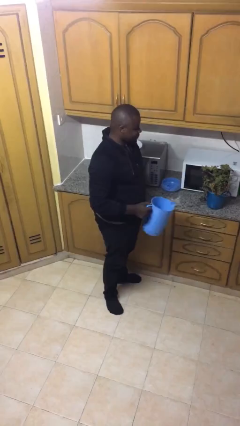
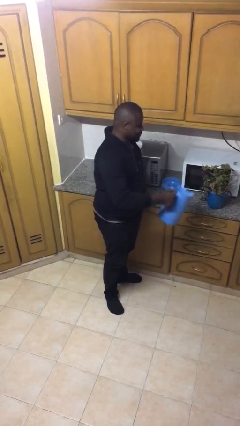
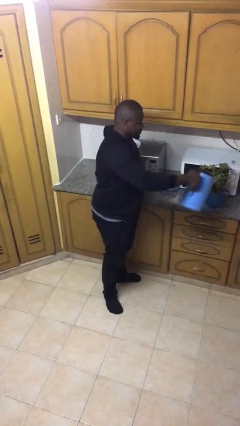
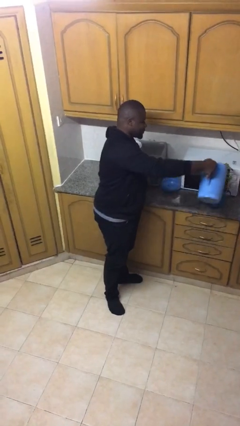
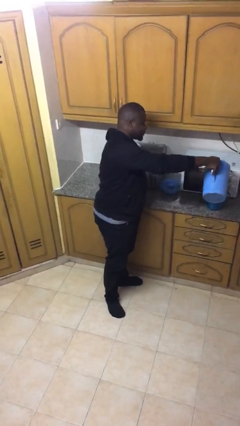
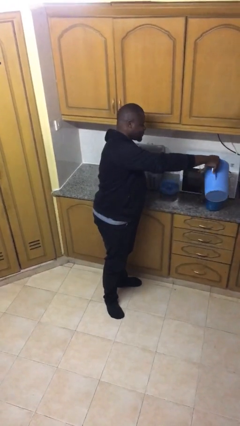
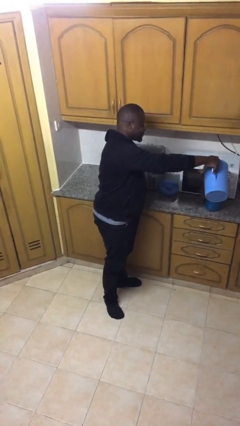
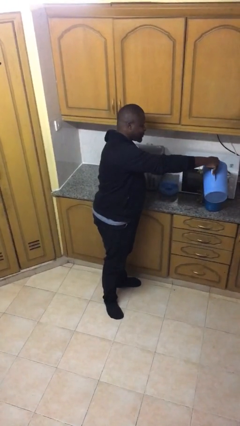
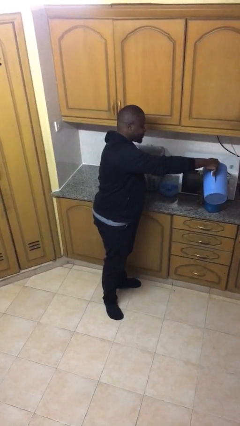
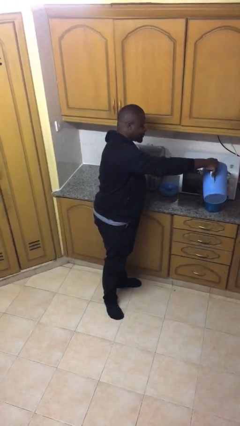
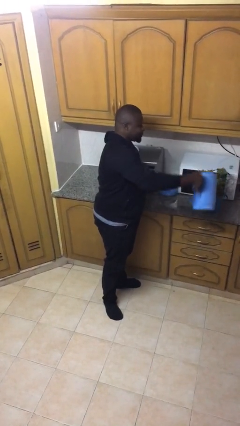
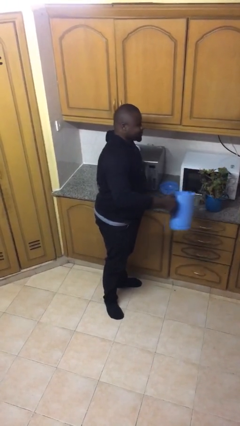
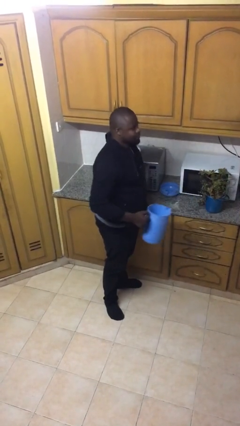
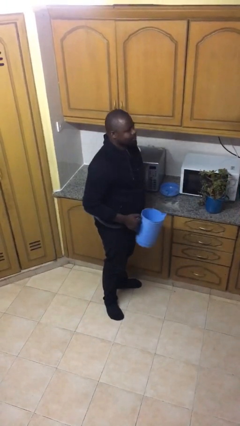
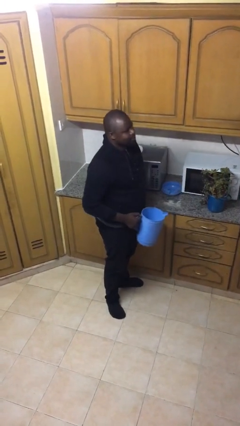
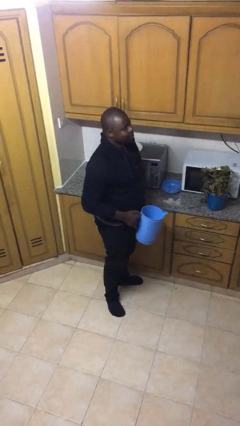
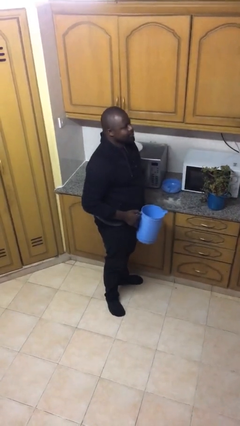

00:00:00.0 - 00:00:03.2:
person waters houseplant

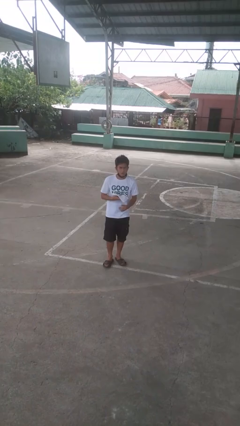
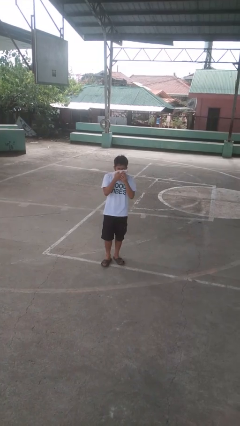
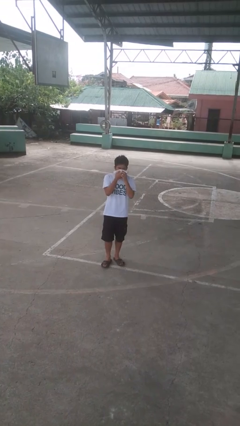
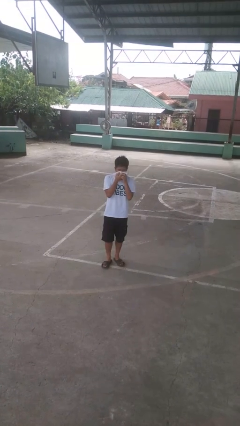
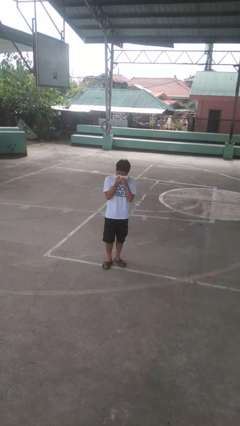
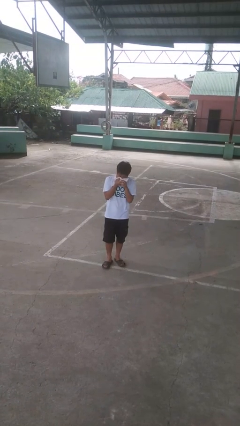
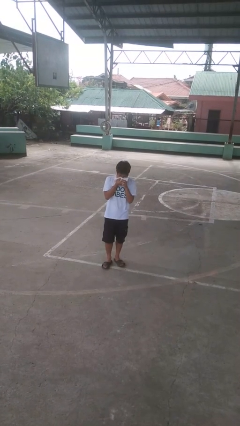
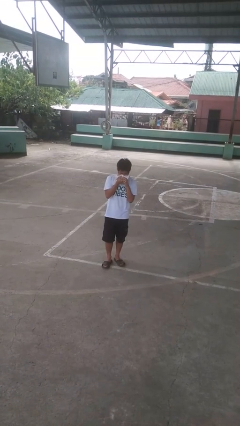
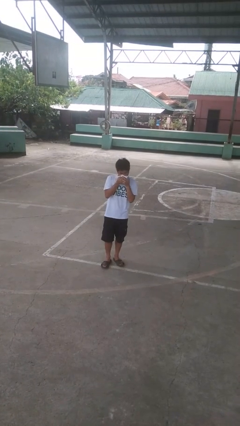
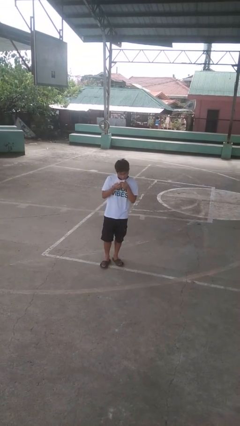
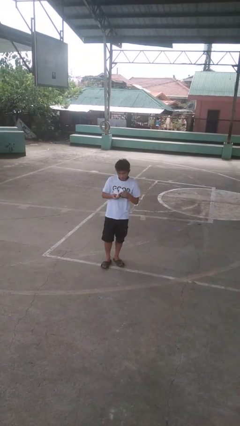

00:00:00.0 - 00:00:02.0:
person blows nose

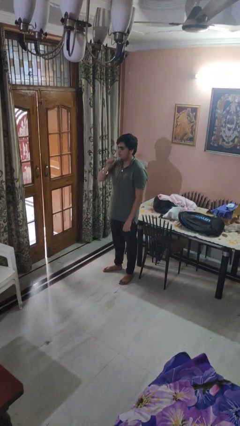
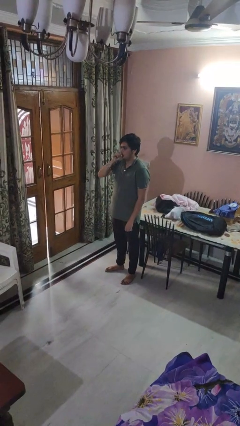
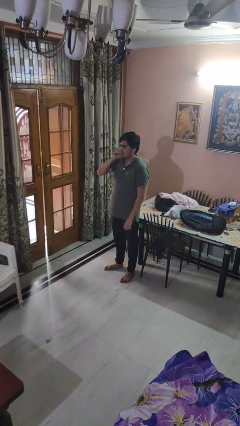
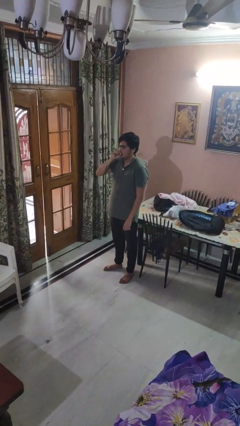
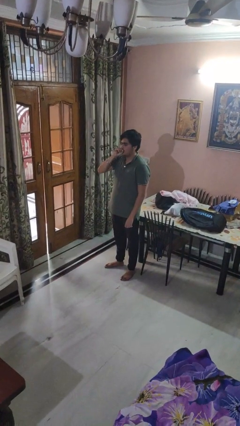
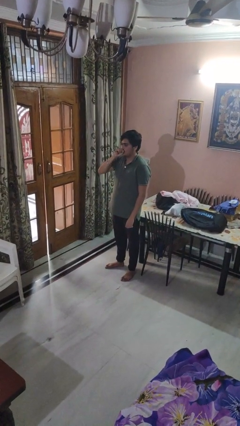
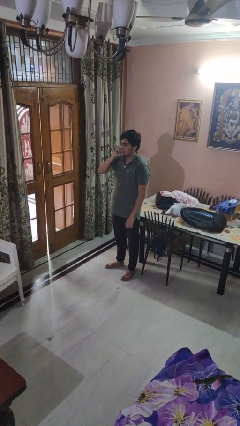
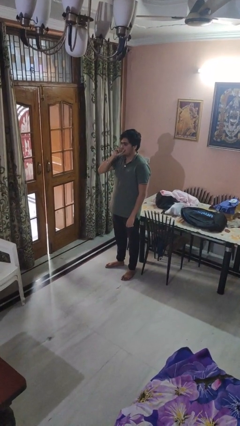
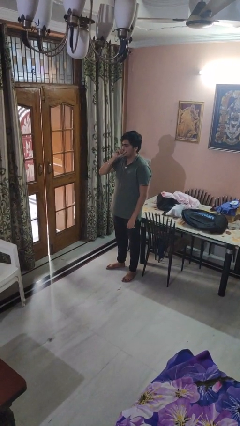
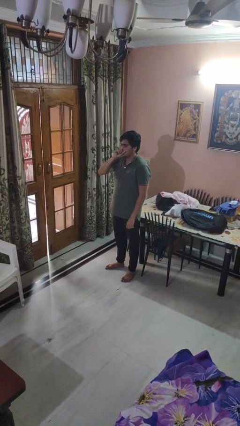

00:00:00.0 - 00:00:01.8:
person vapes

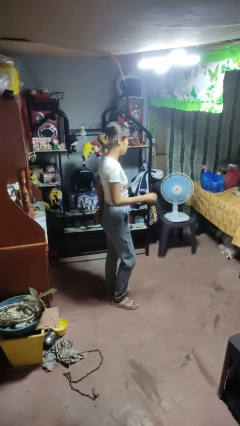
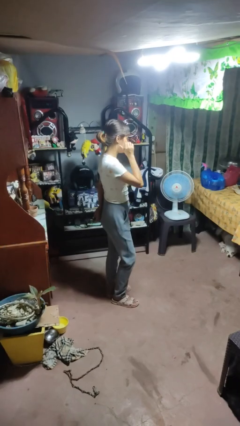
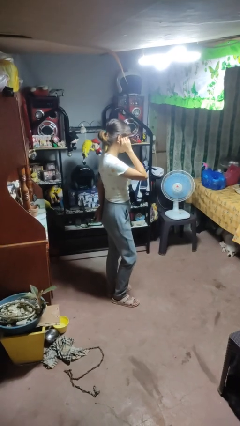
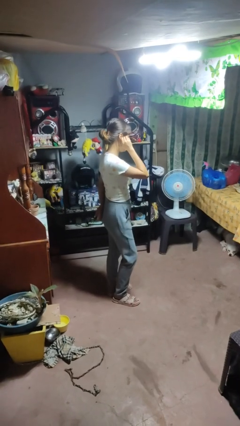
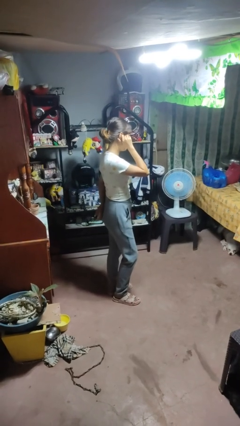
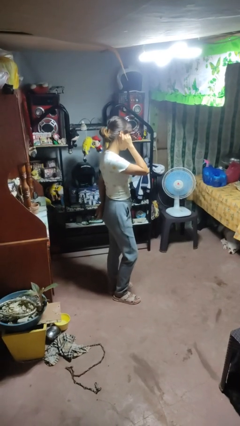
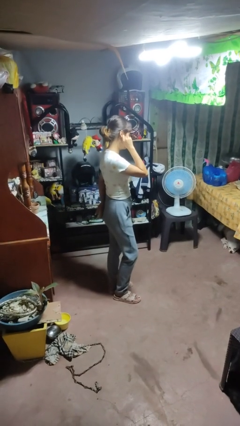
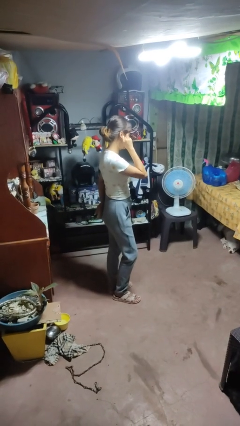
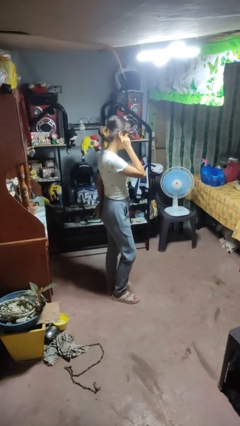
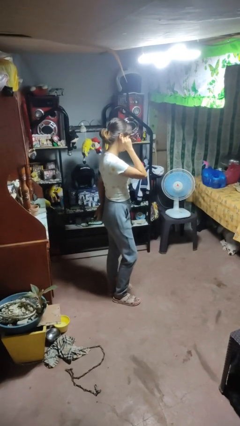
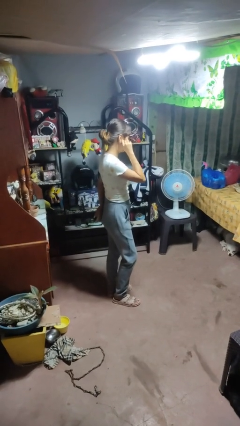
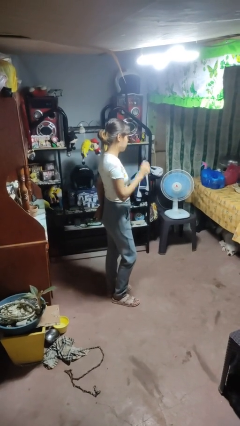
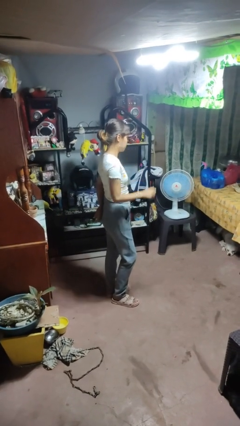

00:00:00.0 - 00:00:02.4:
person touches earlobe

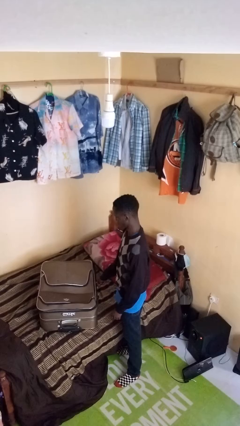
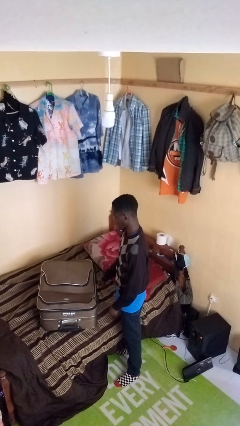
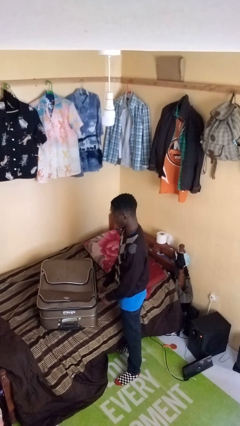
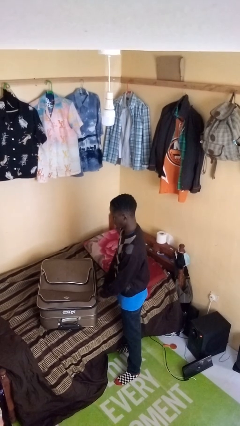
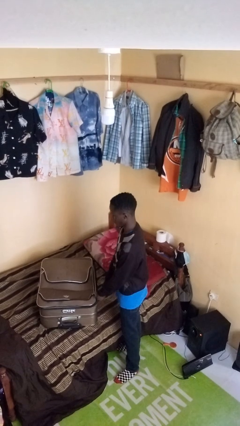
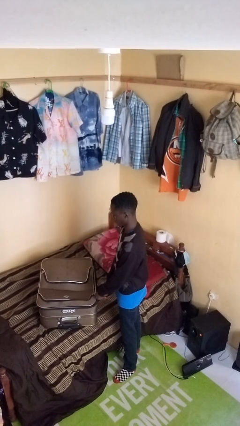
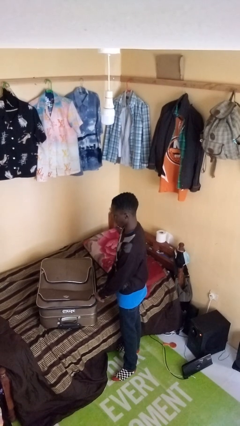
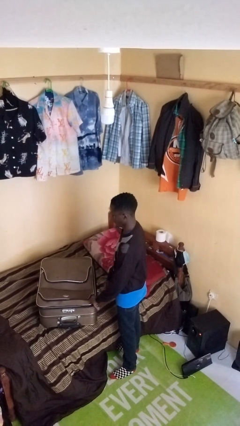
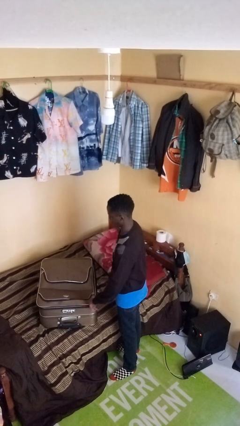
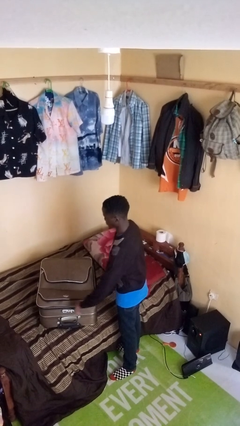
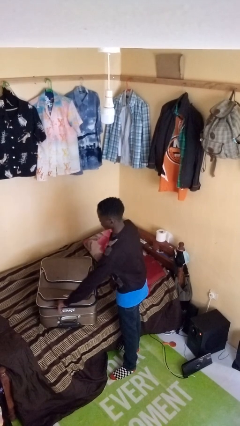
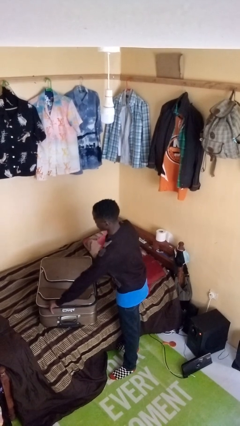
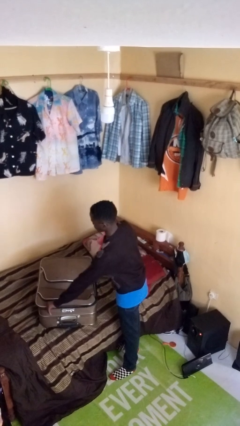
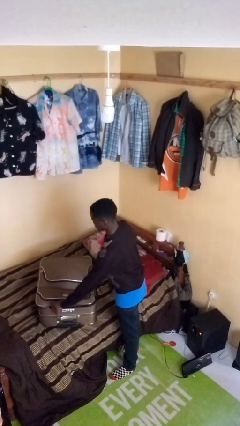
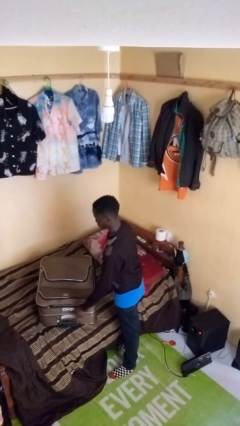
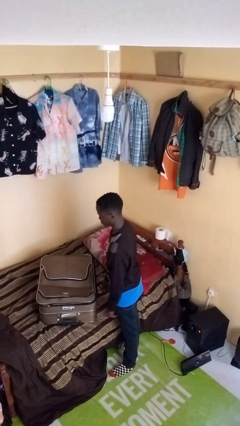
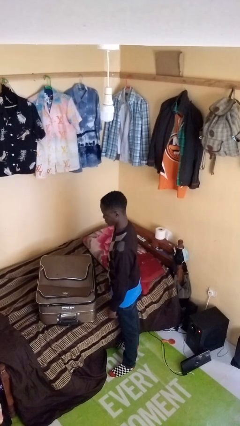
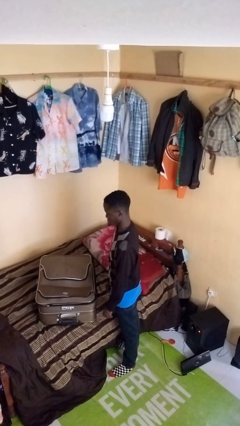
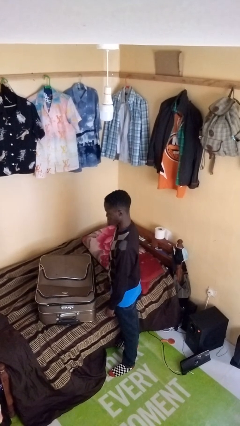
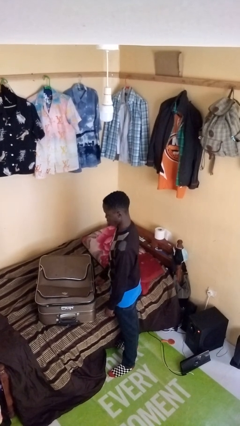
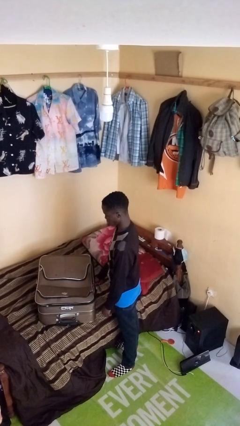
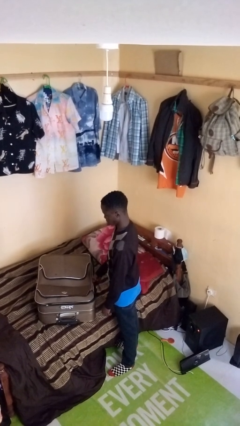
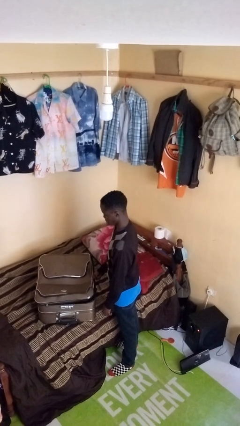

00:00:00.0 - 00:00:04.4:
person opens suitcase

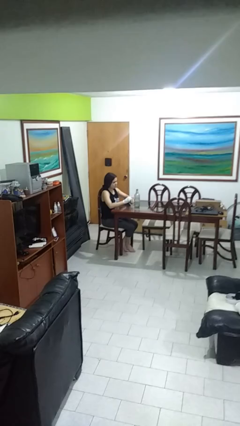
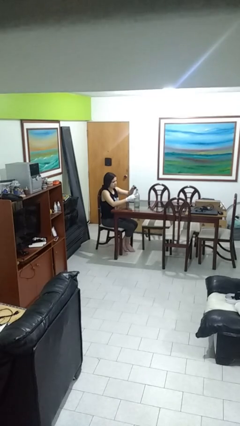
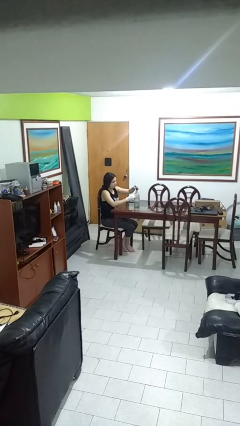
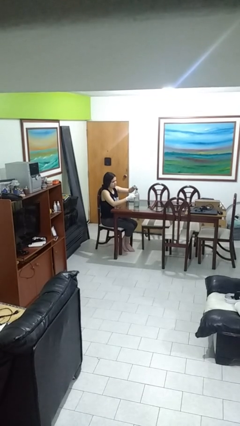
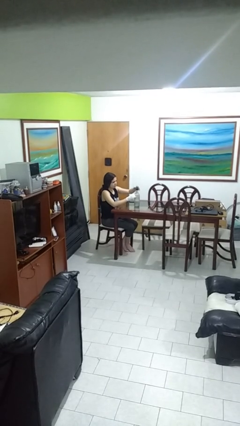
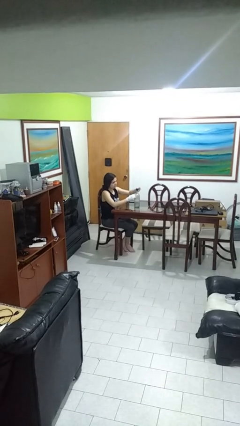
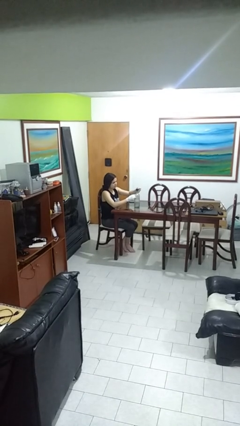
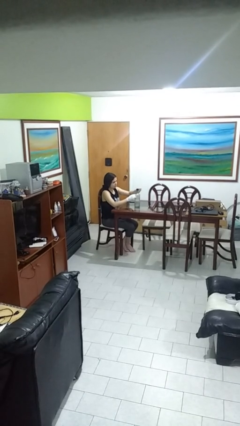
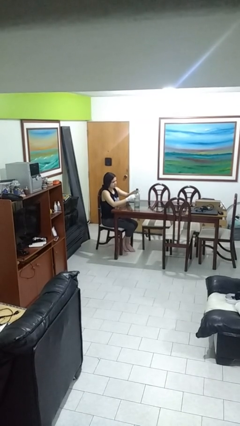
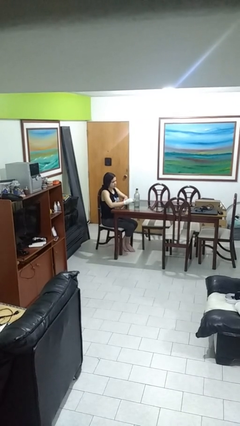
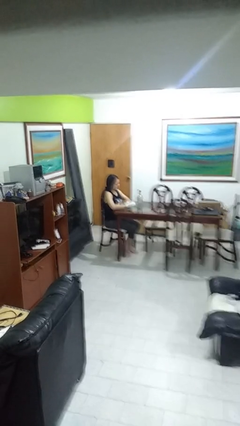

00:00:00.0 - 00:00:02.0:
person screws lid to bottle

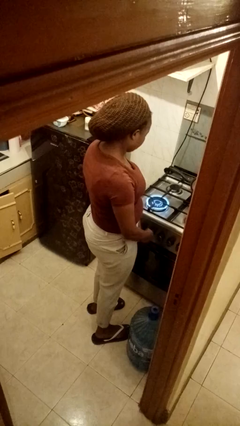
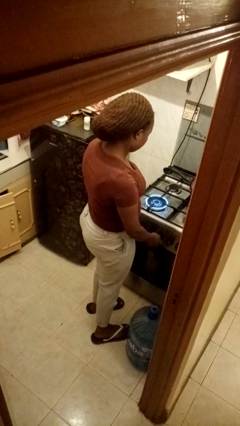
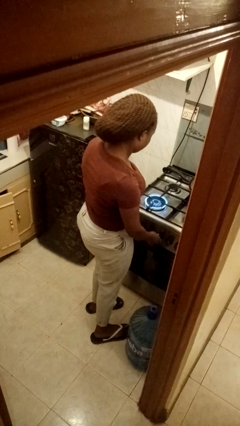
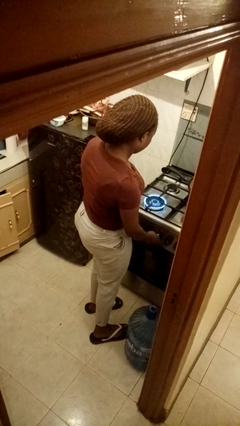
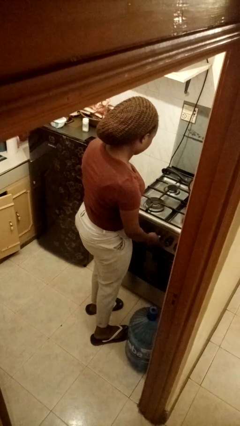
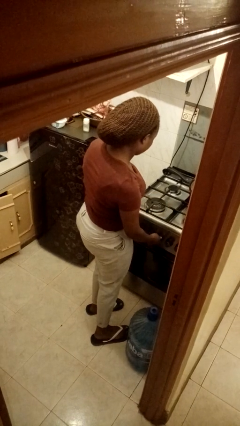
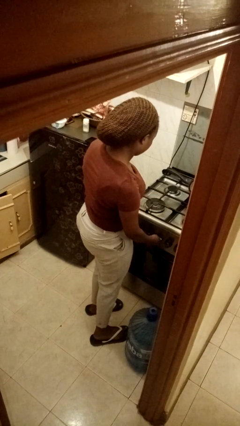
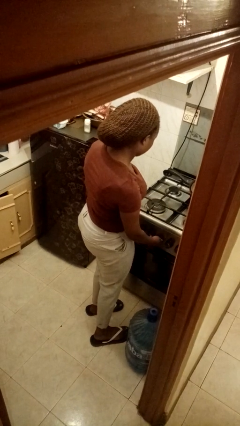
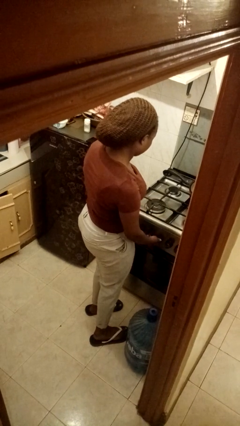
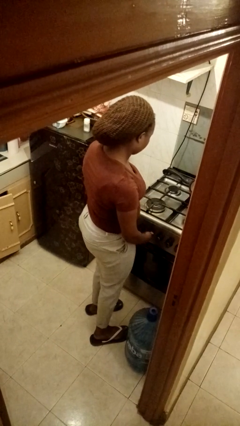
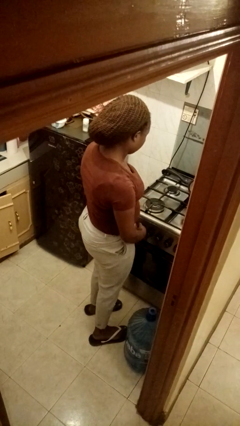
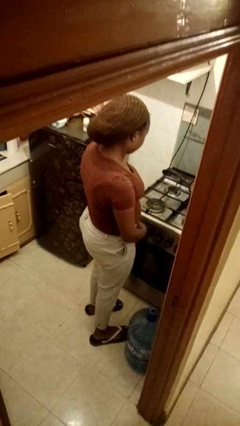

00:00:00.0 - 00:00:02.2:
person turns off stovetop
